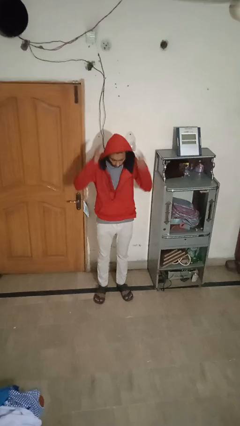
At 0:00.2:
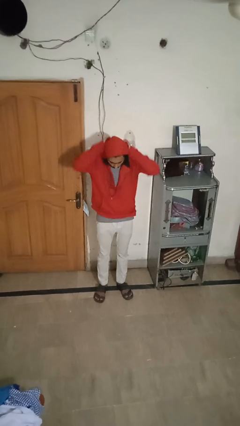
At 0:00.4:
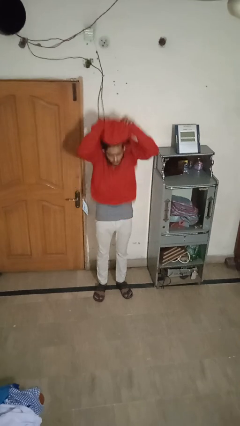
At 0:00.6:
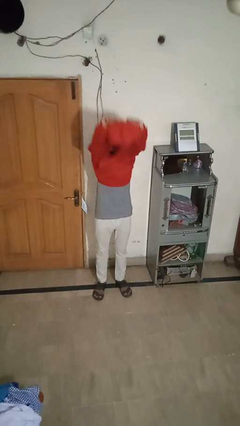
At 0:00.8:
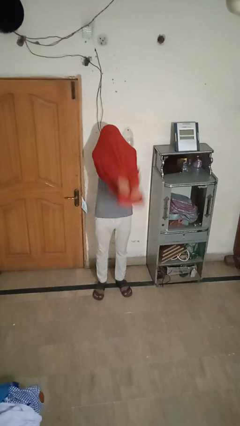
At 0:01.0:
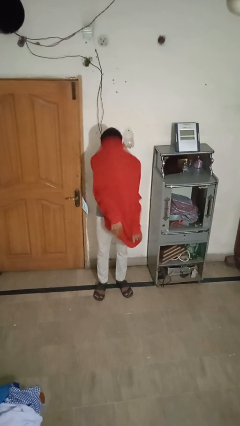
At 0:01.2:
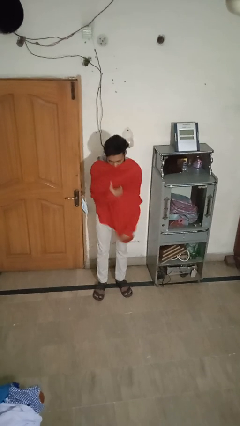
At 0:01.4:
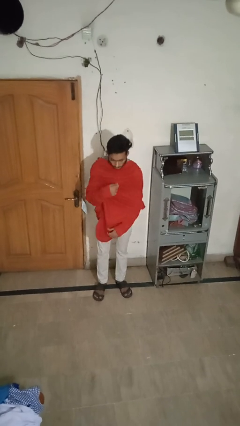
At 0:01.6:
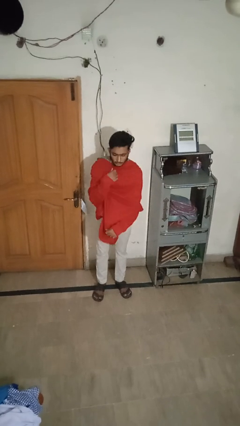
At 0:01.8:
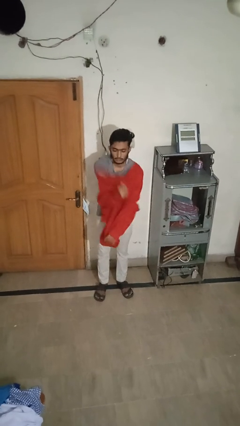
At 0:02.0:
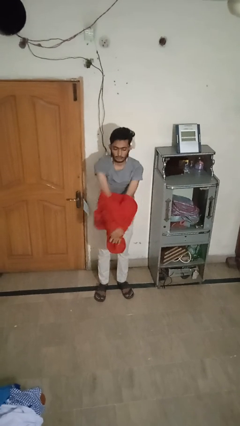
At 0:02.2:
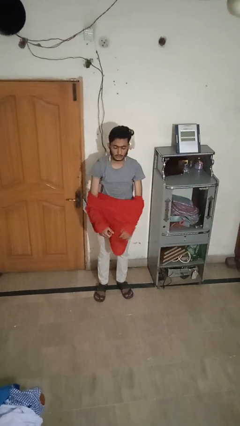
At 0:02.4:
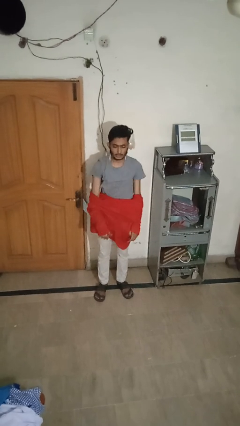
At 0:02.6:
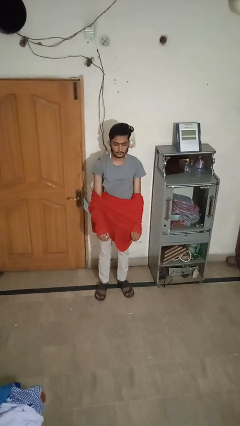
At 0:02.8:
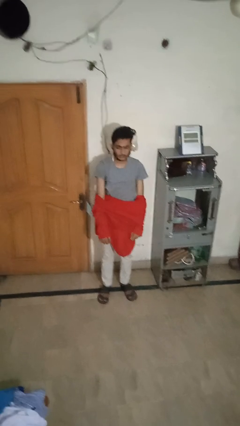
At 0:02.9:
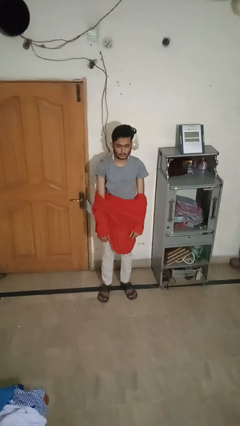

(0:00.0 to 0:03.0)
person takes off hoodie

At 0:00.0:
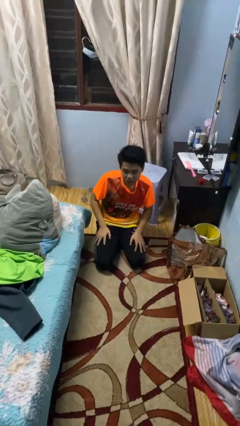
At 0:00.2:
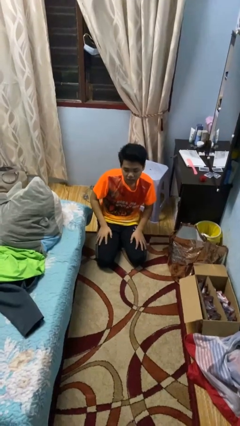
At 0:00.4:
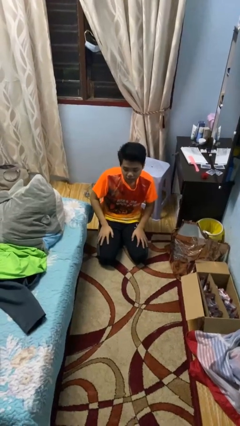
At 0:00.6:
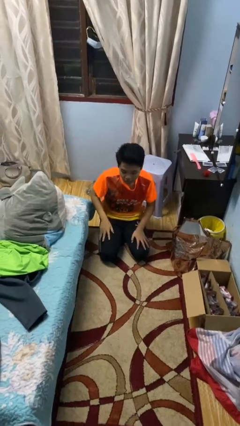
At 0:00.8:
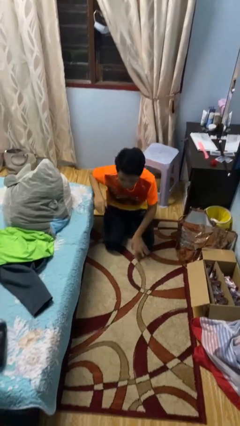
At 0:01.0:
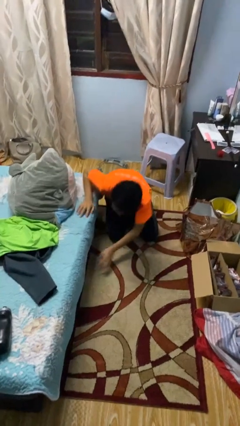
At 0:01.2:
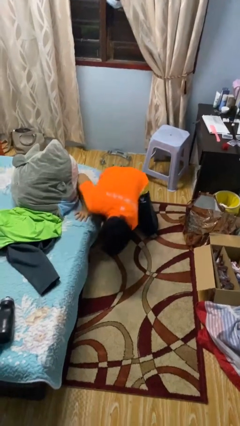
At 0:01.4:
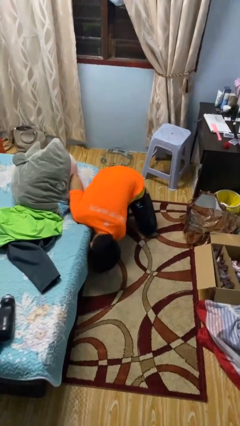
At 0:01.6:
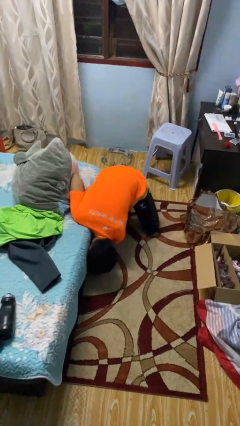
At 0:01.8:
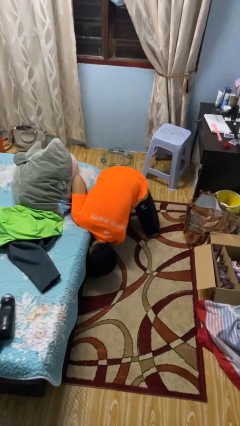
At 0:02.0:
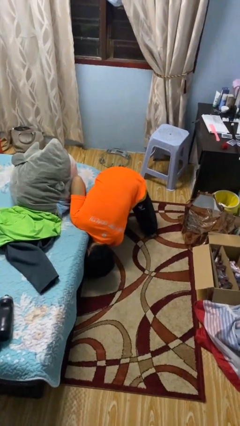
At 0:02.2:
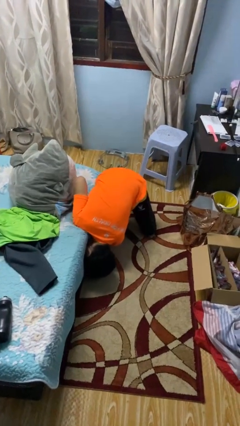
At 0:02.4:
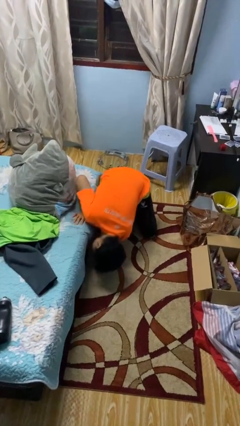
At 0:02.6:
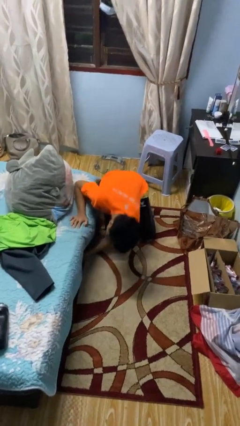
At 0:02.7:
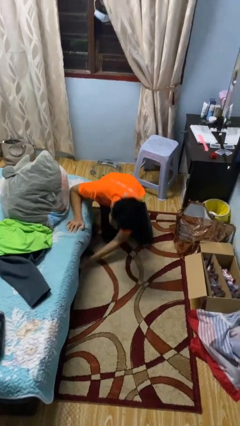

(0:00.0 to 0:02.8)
person searches under bed

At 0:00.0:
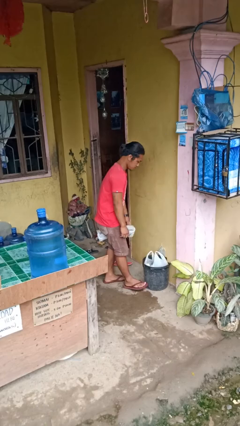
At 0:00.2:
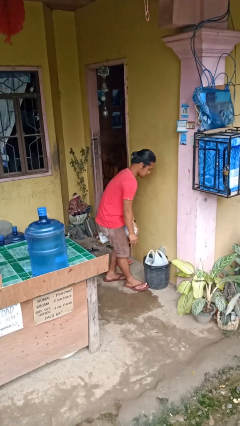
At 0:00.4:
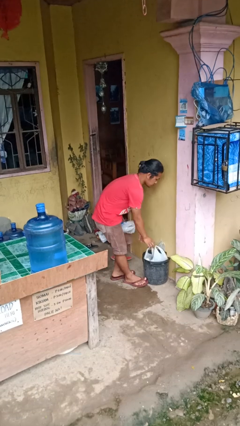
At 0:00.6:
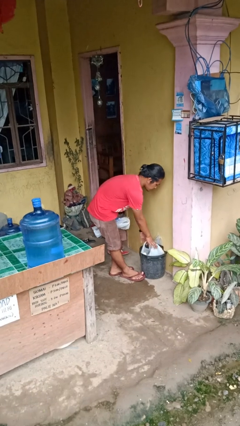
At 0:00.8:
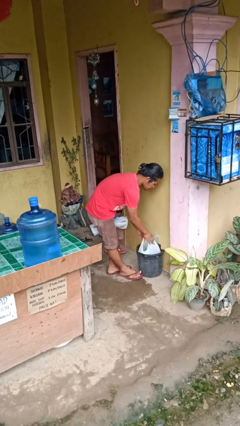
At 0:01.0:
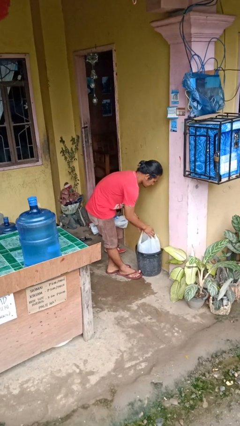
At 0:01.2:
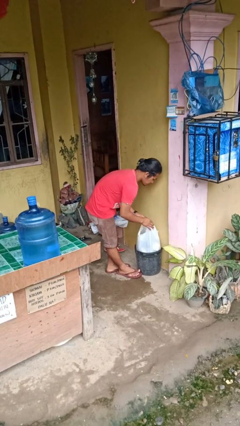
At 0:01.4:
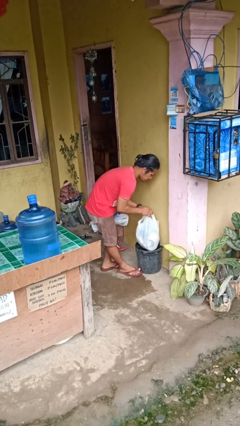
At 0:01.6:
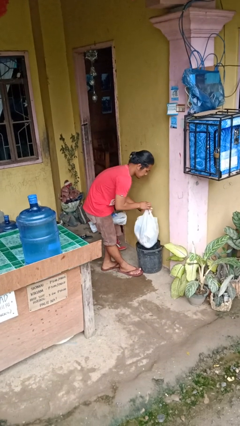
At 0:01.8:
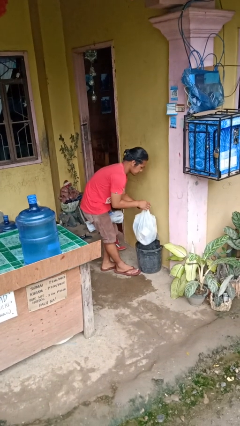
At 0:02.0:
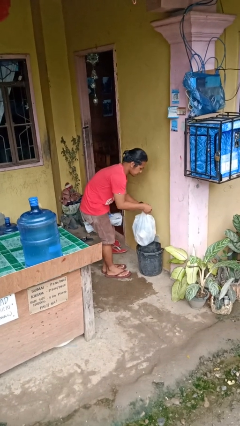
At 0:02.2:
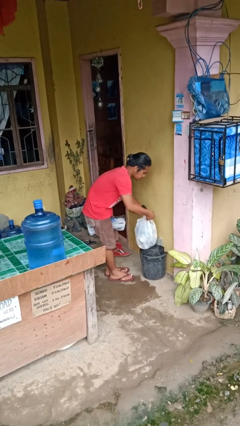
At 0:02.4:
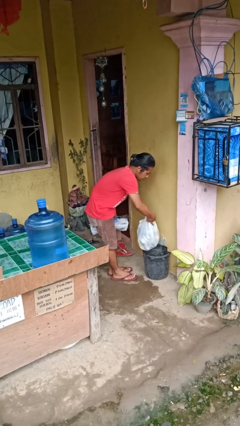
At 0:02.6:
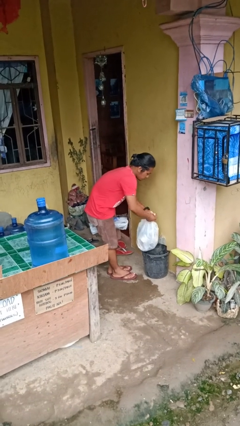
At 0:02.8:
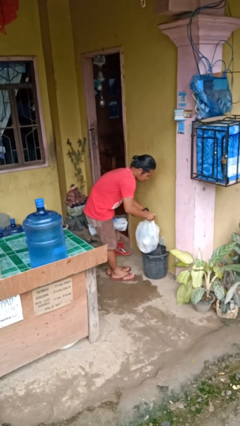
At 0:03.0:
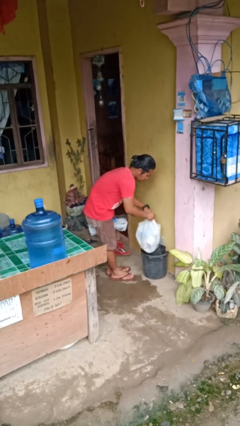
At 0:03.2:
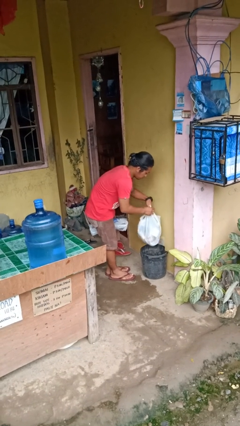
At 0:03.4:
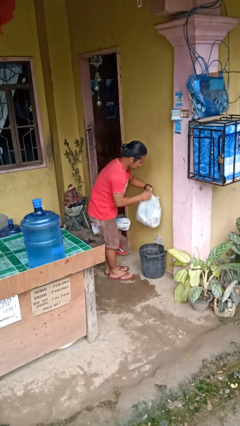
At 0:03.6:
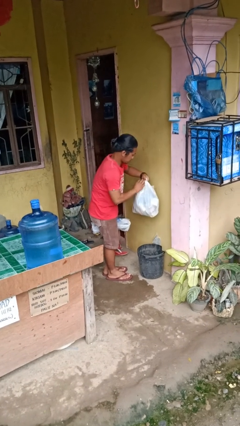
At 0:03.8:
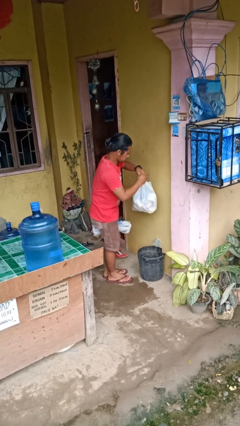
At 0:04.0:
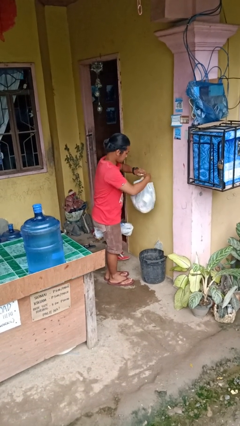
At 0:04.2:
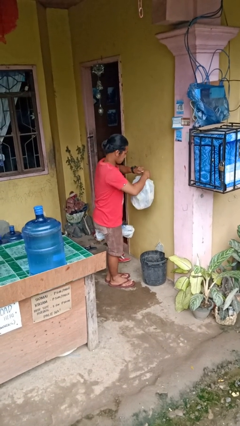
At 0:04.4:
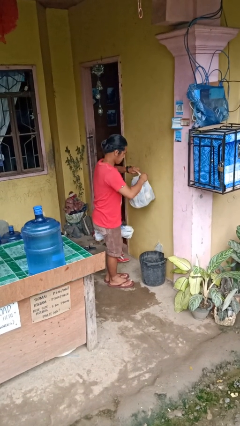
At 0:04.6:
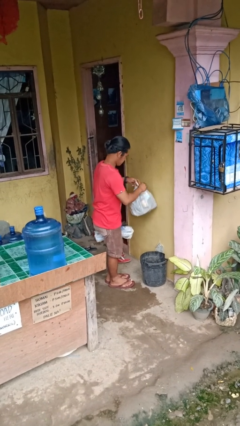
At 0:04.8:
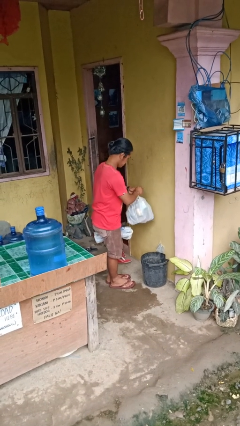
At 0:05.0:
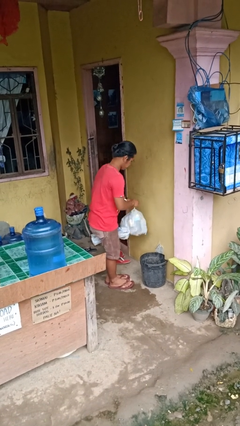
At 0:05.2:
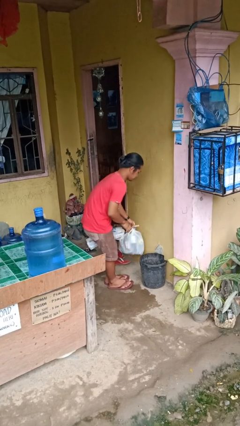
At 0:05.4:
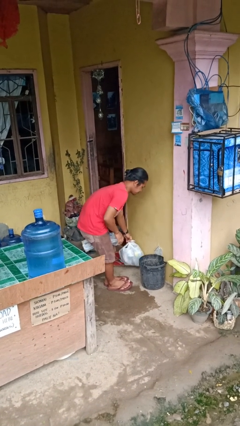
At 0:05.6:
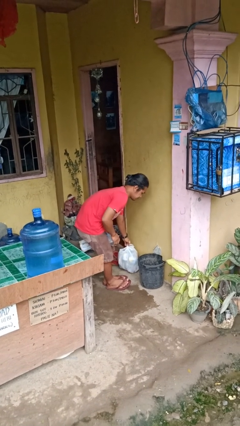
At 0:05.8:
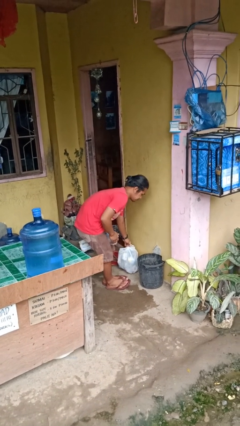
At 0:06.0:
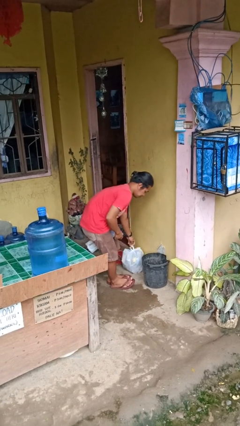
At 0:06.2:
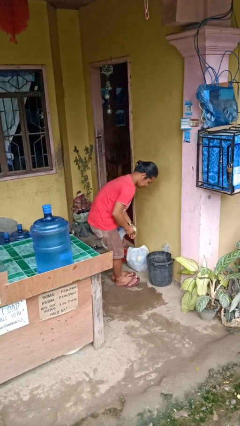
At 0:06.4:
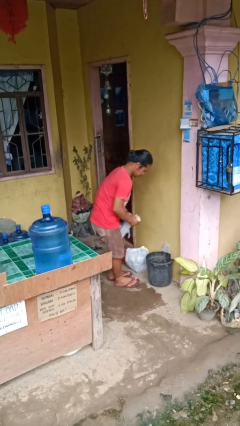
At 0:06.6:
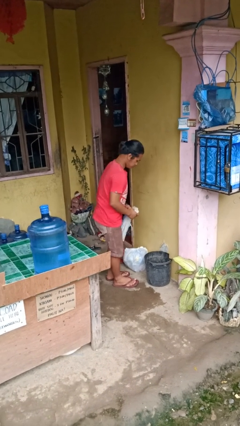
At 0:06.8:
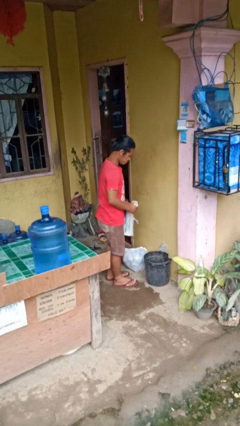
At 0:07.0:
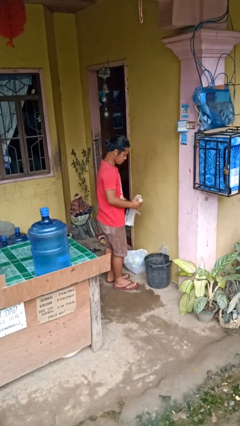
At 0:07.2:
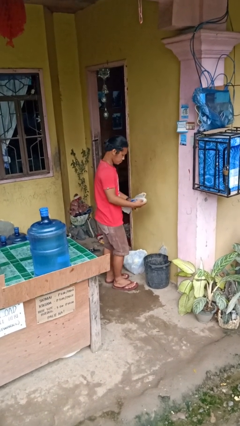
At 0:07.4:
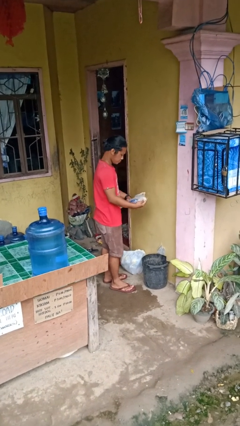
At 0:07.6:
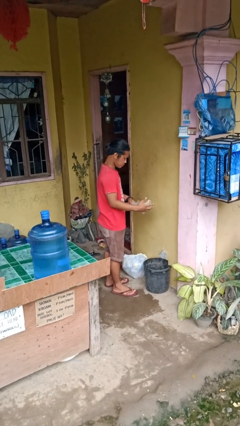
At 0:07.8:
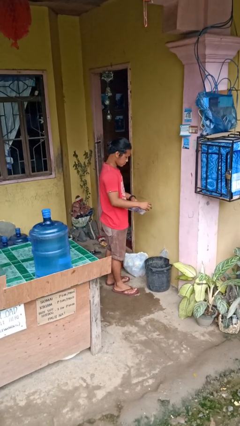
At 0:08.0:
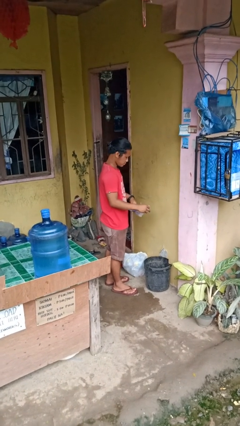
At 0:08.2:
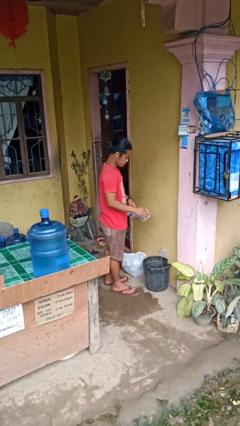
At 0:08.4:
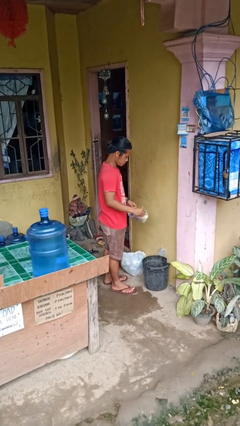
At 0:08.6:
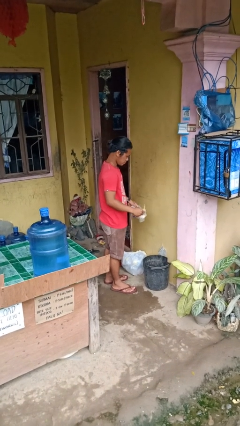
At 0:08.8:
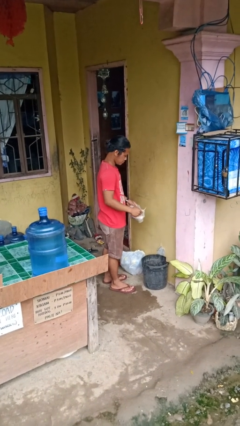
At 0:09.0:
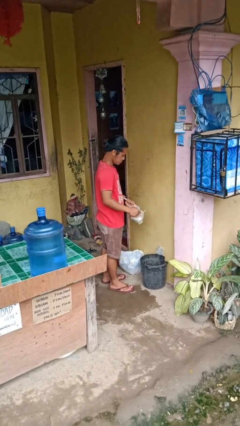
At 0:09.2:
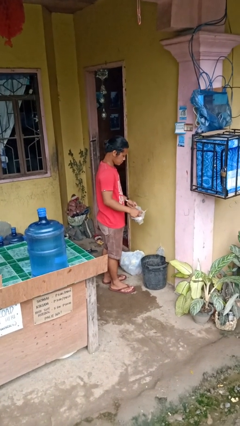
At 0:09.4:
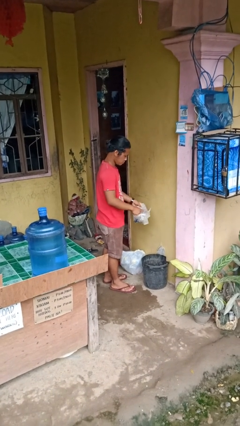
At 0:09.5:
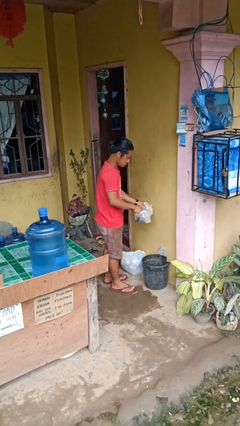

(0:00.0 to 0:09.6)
person removes trashbag from trashcan

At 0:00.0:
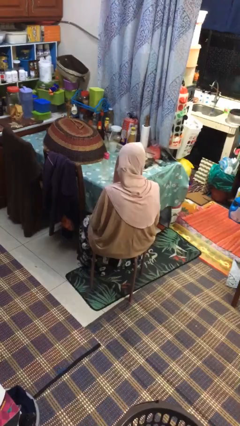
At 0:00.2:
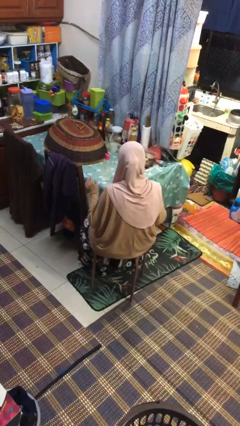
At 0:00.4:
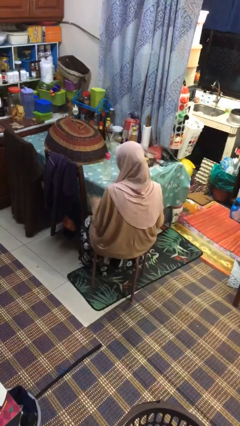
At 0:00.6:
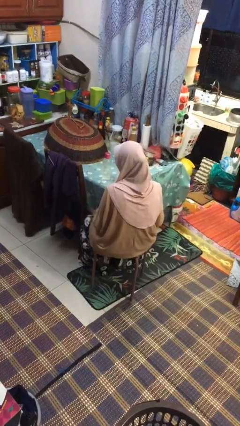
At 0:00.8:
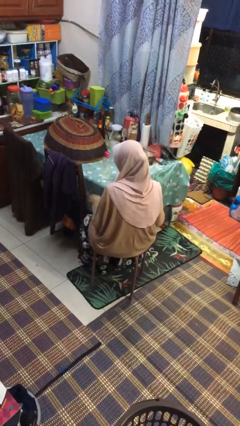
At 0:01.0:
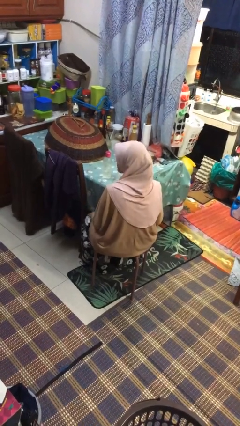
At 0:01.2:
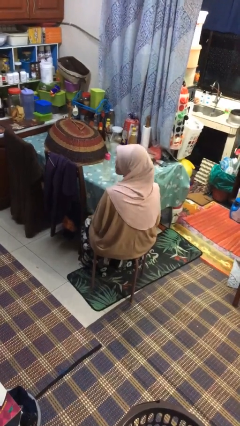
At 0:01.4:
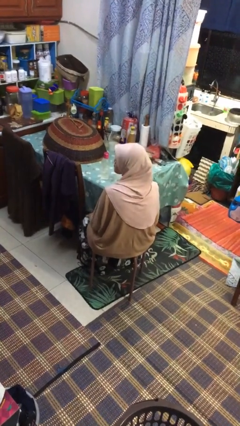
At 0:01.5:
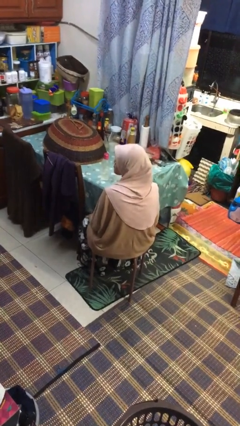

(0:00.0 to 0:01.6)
person slaps hands on thighs

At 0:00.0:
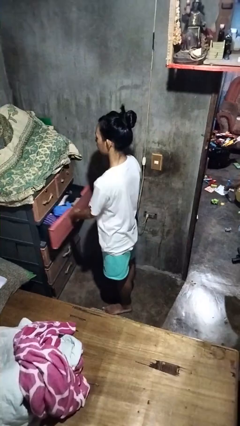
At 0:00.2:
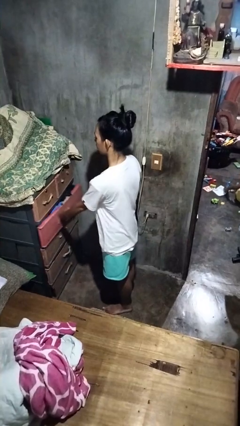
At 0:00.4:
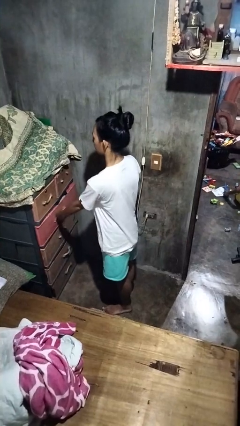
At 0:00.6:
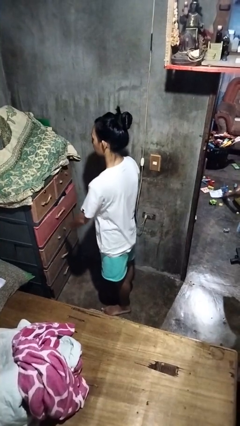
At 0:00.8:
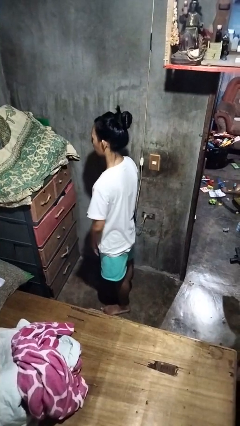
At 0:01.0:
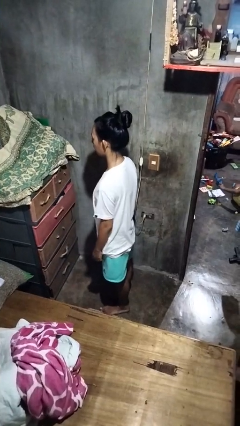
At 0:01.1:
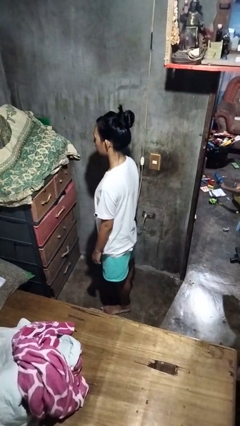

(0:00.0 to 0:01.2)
person closes dresser drawer
